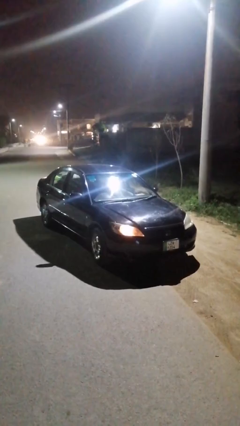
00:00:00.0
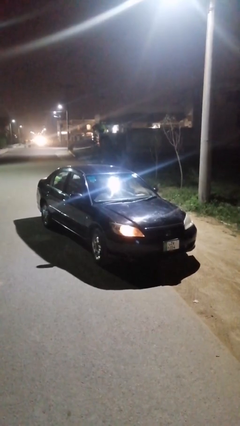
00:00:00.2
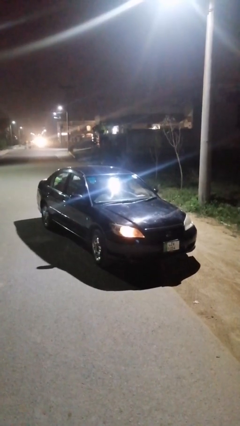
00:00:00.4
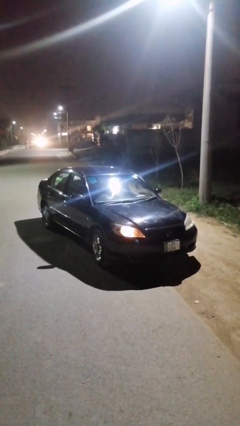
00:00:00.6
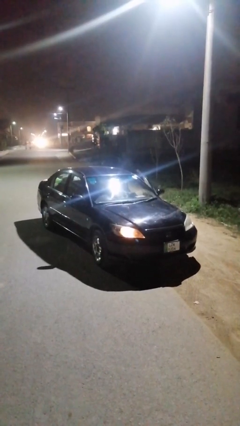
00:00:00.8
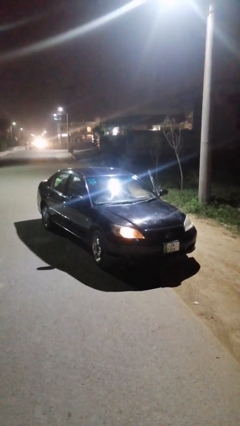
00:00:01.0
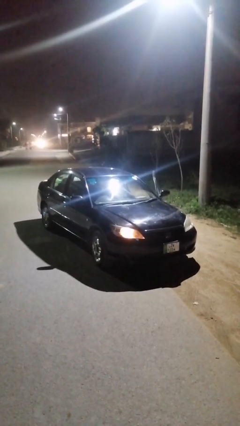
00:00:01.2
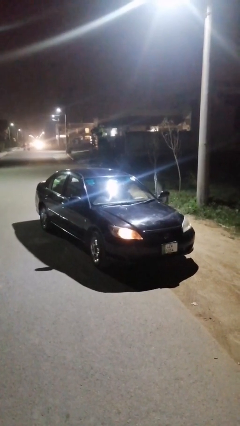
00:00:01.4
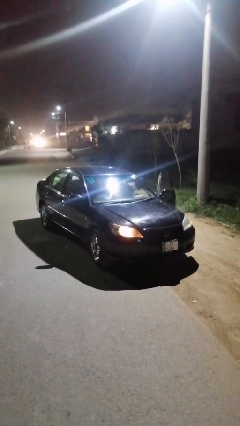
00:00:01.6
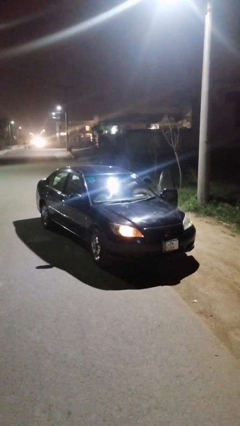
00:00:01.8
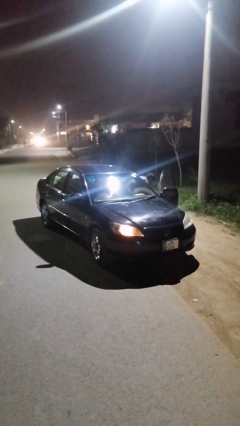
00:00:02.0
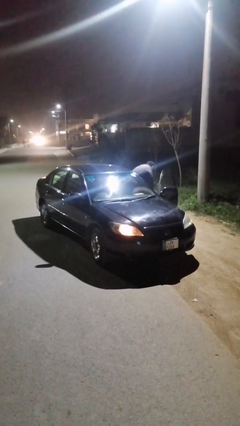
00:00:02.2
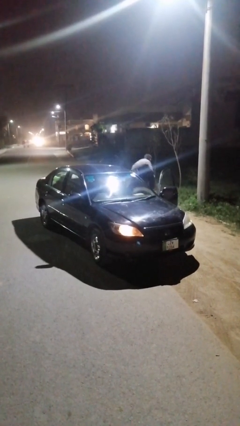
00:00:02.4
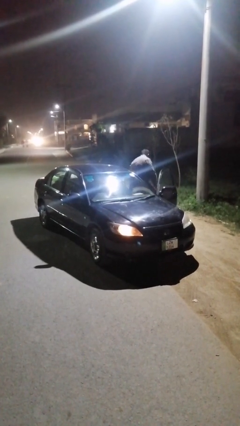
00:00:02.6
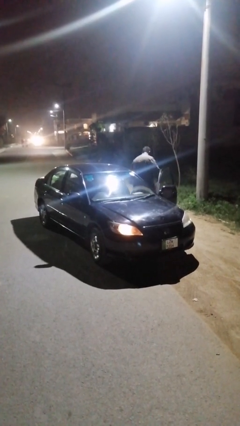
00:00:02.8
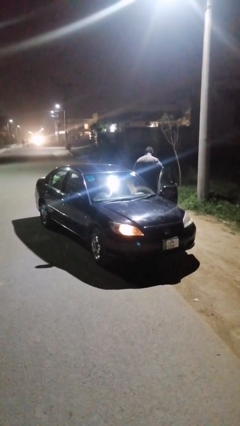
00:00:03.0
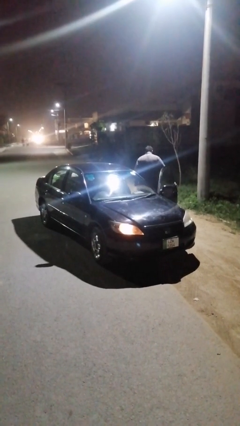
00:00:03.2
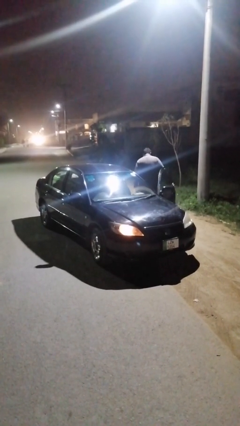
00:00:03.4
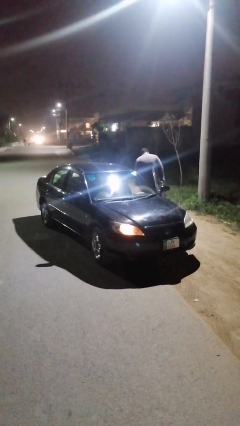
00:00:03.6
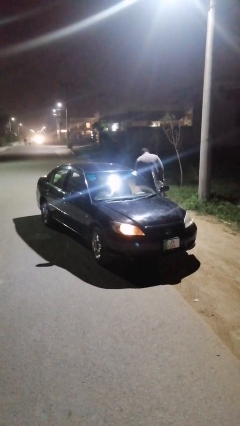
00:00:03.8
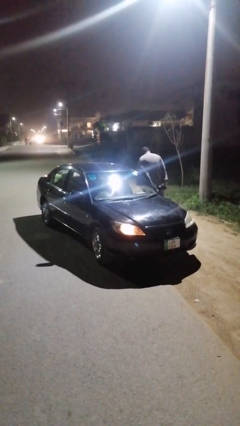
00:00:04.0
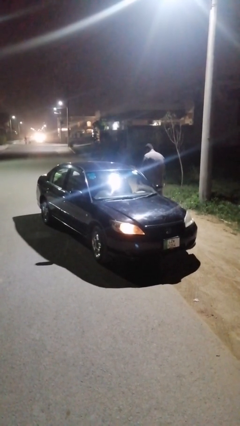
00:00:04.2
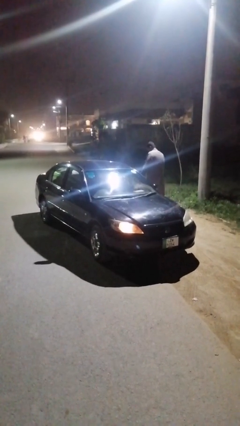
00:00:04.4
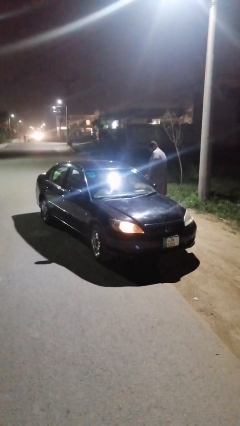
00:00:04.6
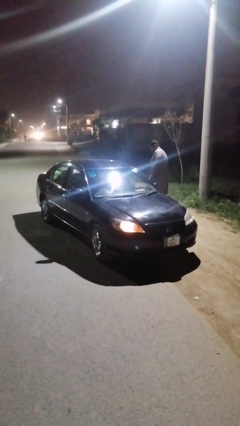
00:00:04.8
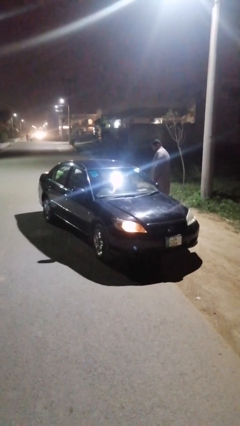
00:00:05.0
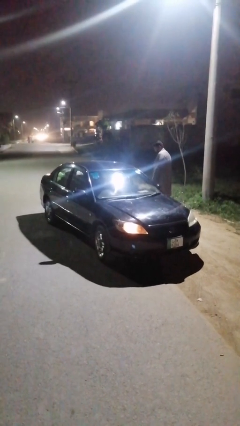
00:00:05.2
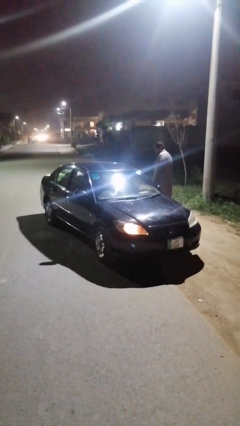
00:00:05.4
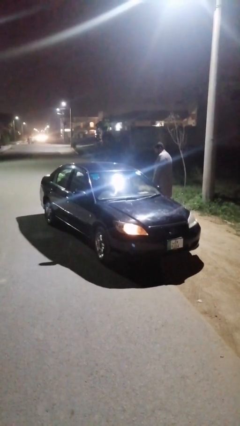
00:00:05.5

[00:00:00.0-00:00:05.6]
car drops off person

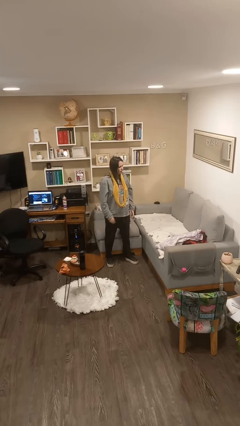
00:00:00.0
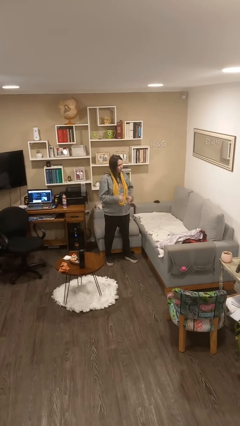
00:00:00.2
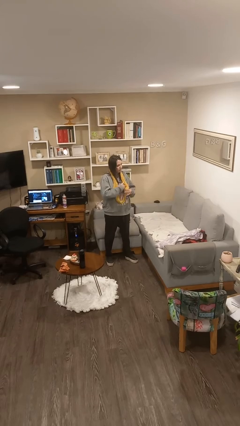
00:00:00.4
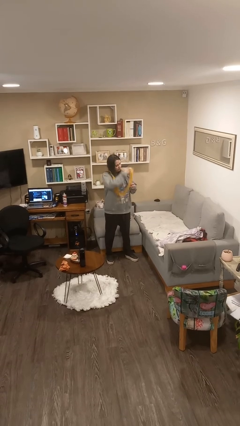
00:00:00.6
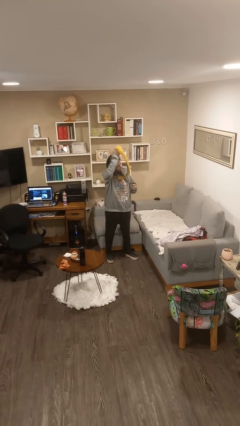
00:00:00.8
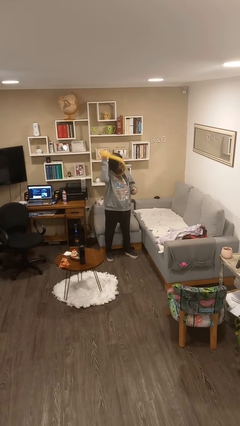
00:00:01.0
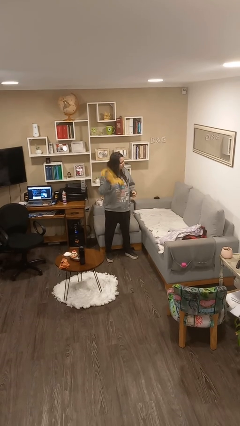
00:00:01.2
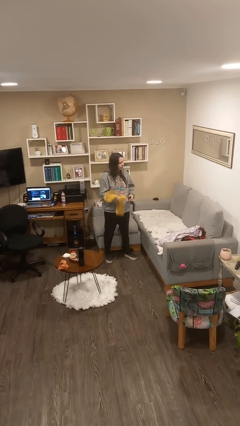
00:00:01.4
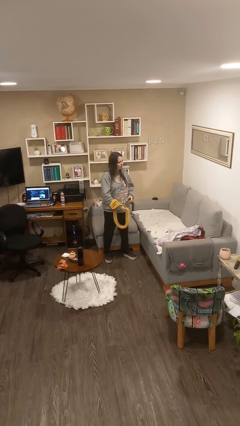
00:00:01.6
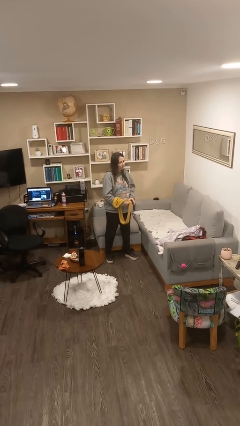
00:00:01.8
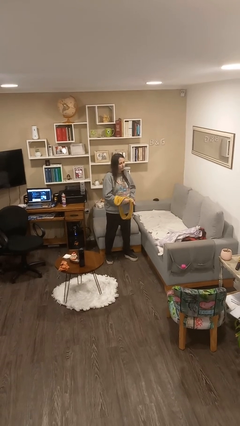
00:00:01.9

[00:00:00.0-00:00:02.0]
person takes off scarf

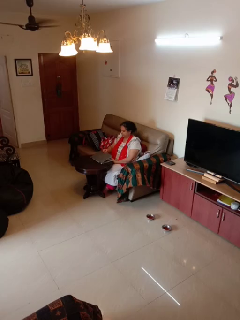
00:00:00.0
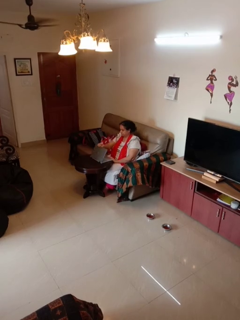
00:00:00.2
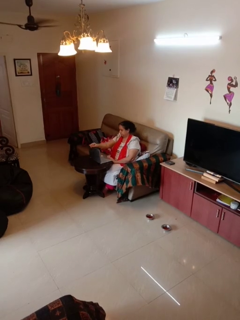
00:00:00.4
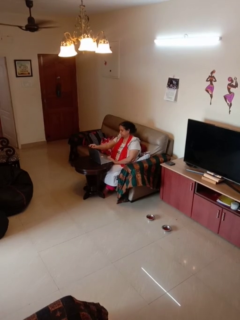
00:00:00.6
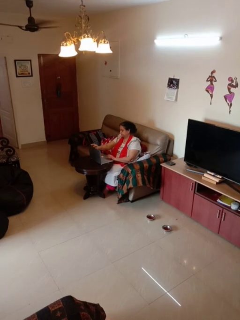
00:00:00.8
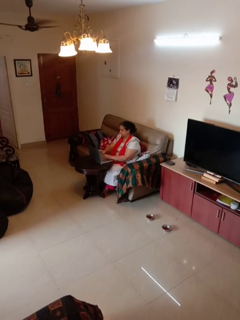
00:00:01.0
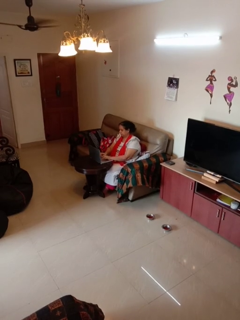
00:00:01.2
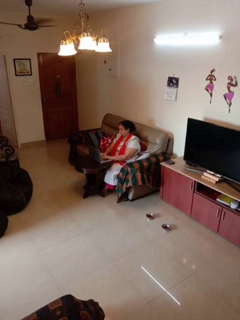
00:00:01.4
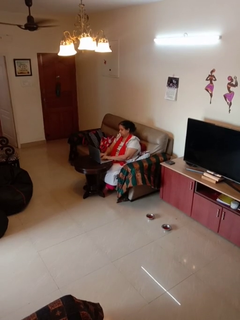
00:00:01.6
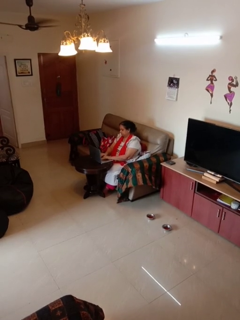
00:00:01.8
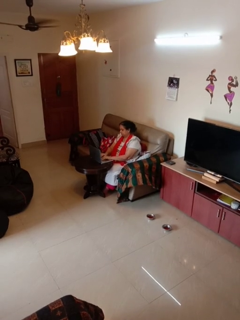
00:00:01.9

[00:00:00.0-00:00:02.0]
person opens laptop

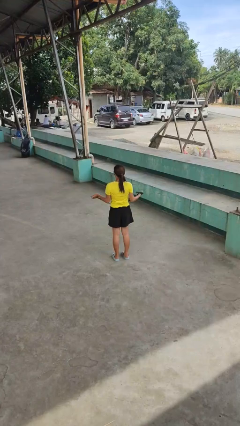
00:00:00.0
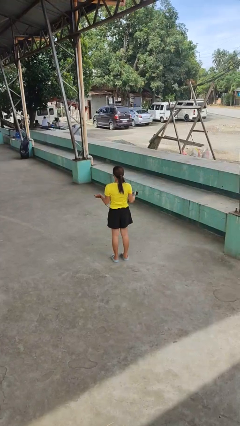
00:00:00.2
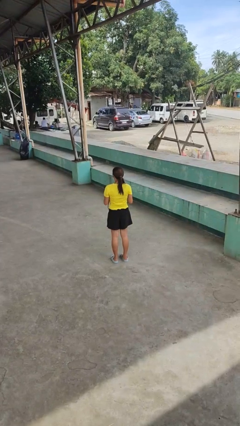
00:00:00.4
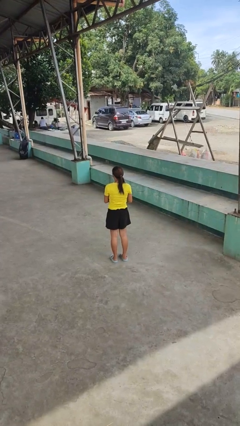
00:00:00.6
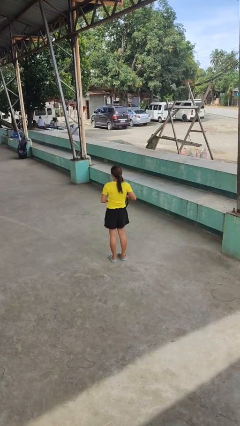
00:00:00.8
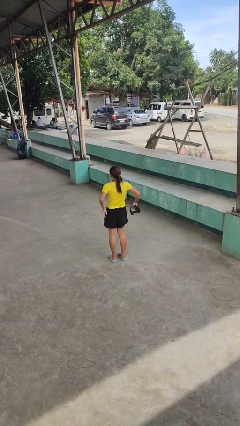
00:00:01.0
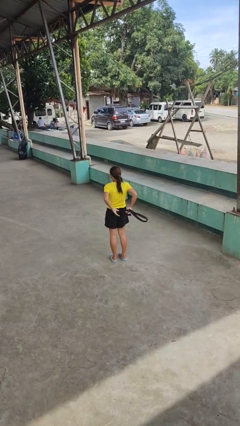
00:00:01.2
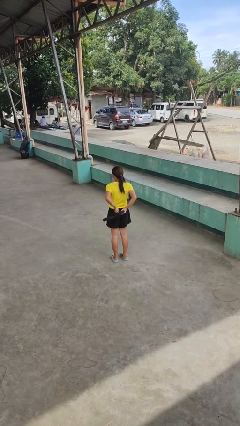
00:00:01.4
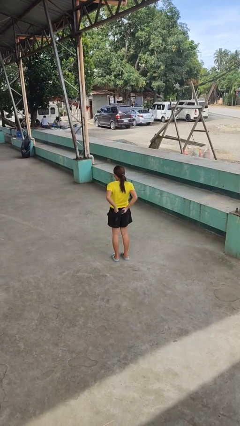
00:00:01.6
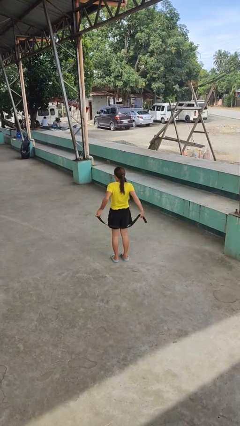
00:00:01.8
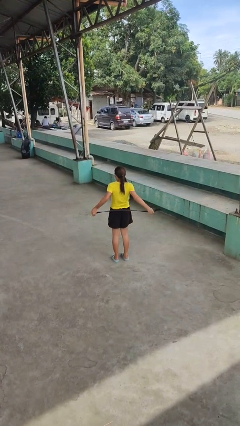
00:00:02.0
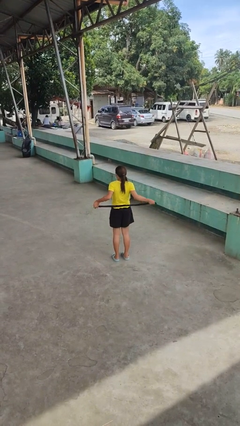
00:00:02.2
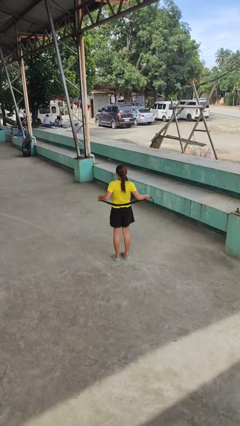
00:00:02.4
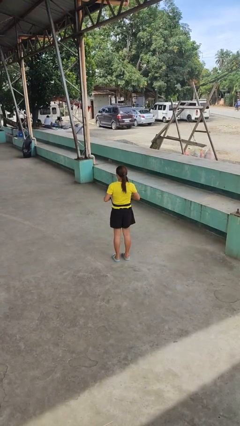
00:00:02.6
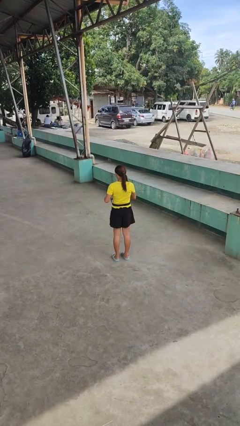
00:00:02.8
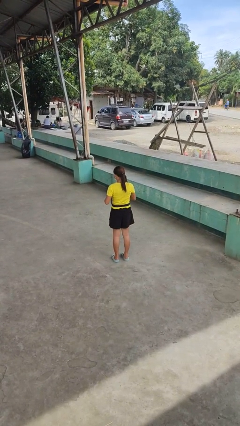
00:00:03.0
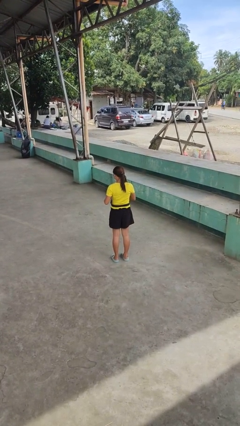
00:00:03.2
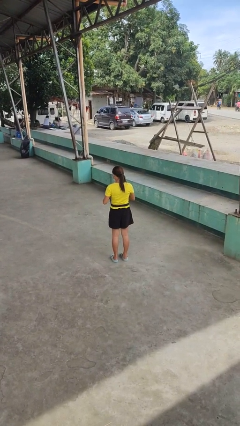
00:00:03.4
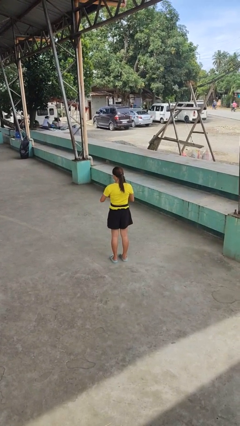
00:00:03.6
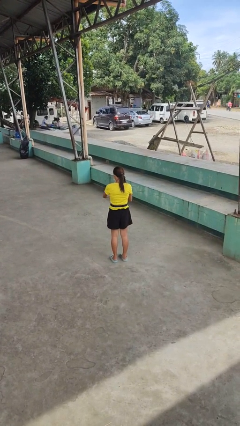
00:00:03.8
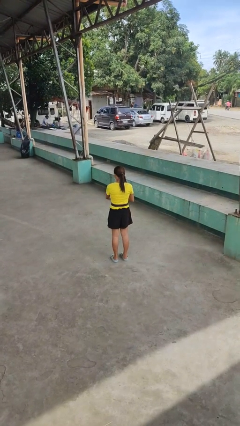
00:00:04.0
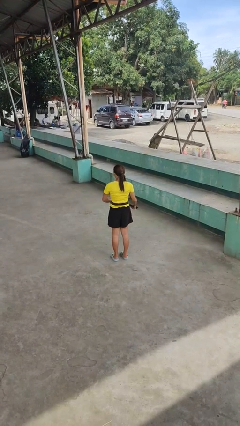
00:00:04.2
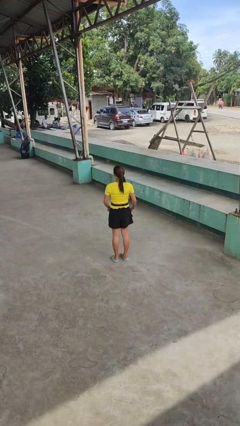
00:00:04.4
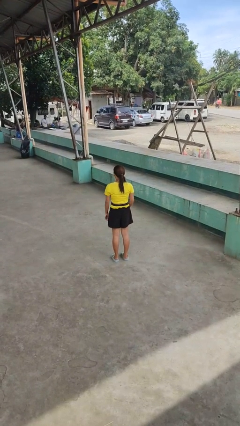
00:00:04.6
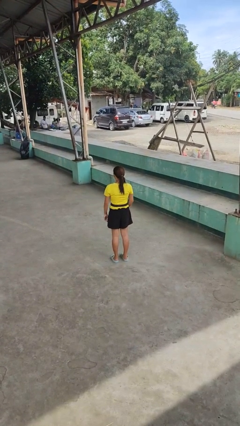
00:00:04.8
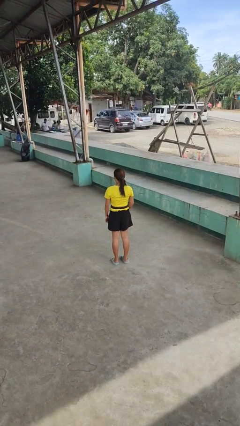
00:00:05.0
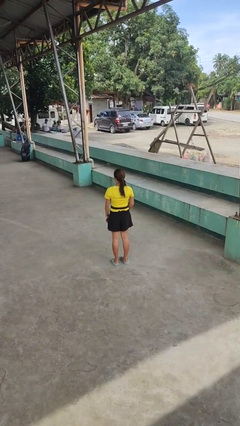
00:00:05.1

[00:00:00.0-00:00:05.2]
person puts on belt

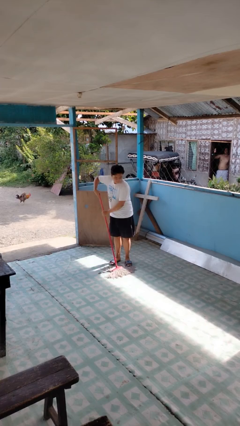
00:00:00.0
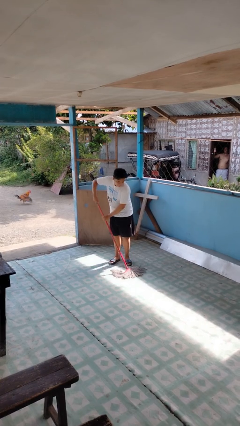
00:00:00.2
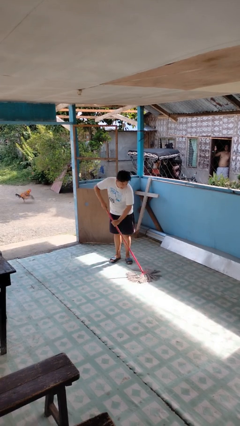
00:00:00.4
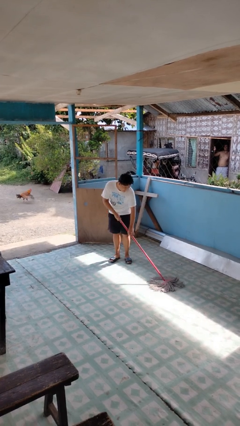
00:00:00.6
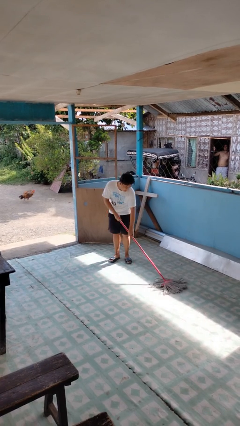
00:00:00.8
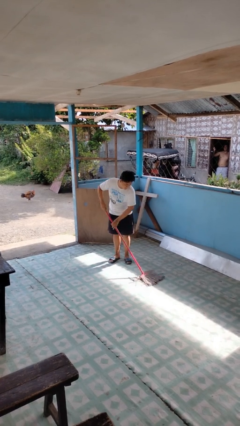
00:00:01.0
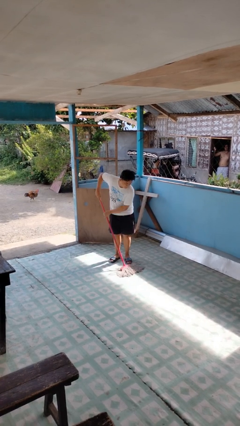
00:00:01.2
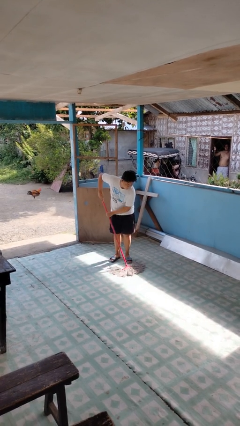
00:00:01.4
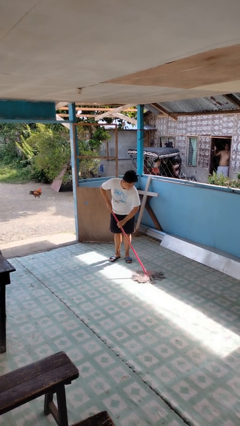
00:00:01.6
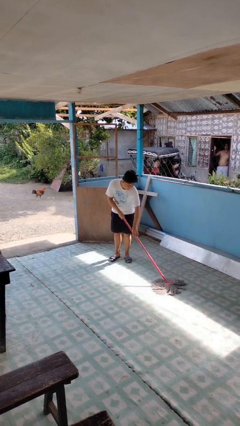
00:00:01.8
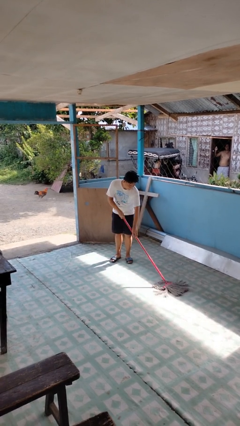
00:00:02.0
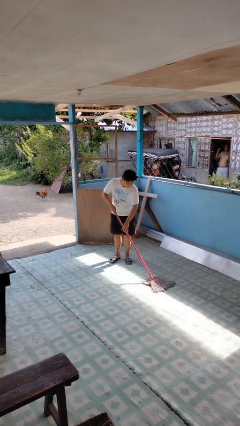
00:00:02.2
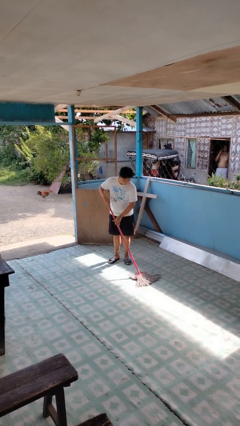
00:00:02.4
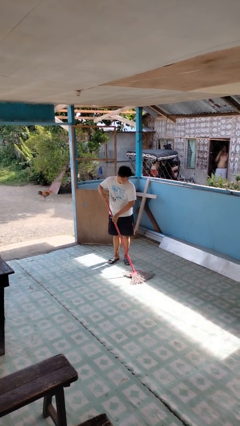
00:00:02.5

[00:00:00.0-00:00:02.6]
person mops

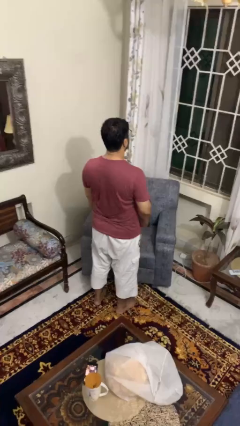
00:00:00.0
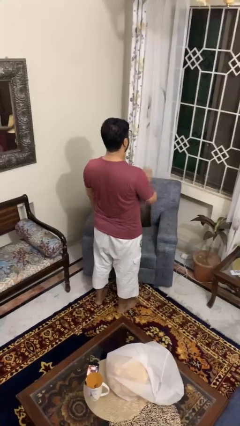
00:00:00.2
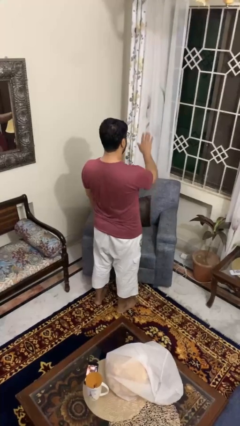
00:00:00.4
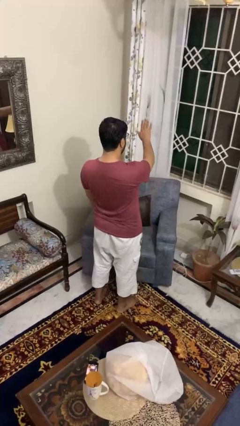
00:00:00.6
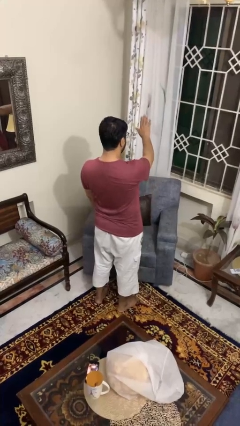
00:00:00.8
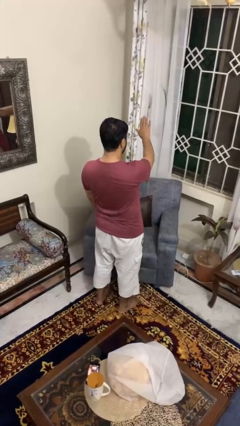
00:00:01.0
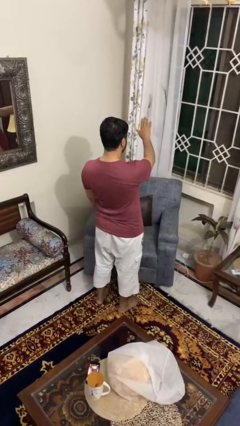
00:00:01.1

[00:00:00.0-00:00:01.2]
person gestures stop
